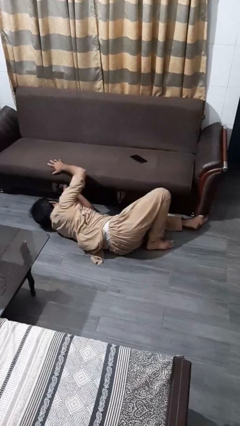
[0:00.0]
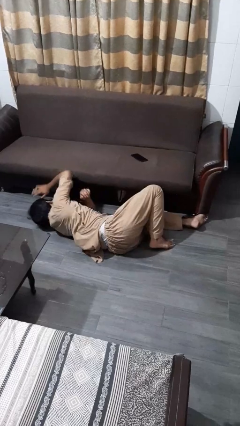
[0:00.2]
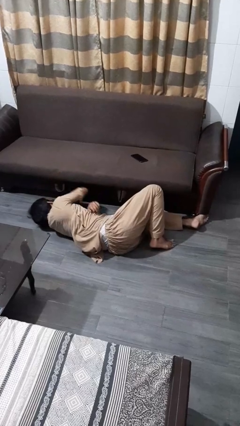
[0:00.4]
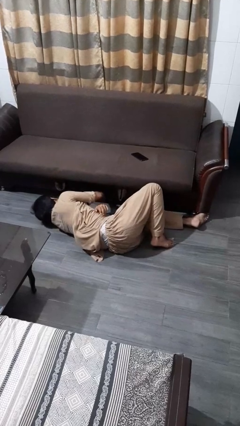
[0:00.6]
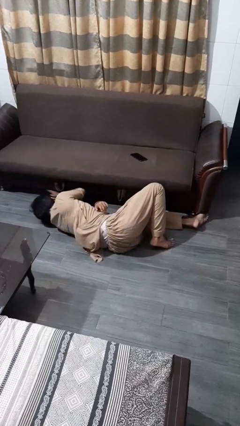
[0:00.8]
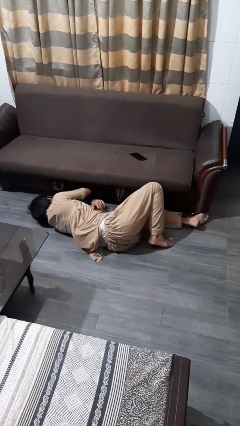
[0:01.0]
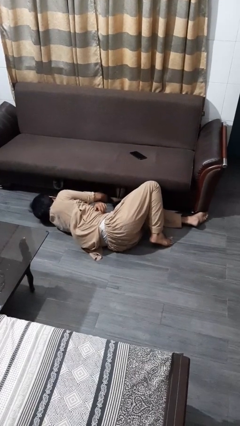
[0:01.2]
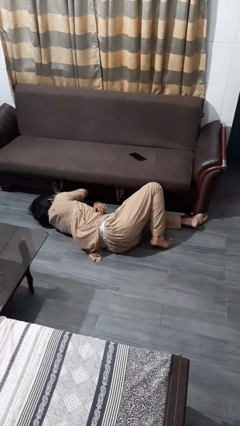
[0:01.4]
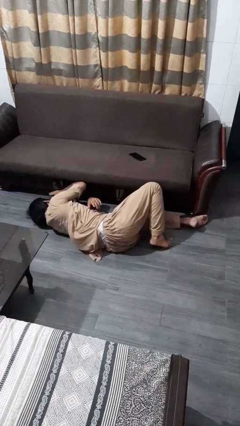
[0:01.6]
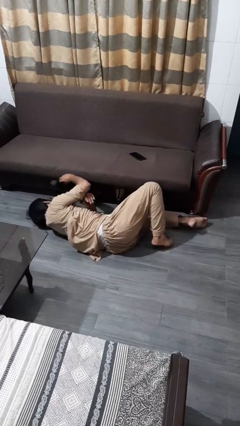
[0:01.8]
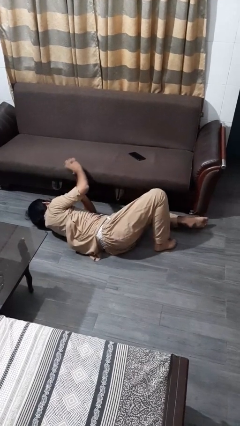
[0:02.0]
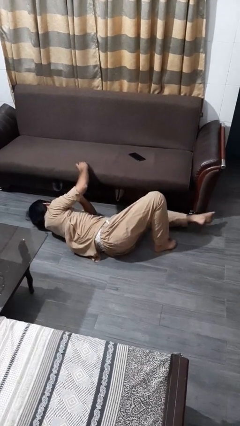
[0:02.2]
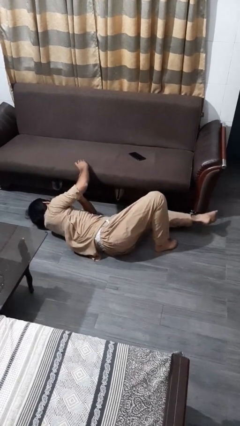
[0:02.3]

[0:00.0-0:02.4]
person searches under couch

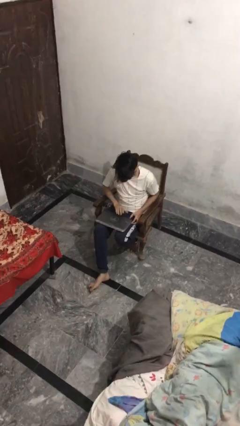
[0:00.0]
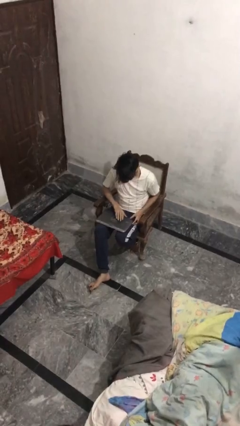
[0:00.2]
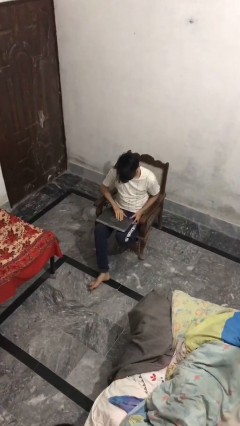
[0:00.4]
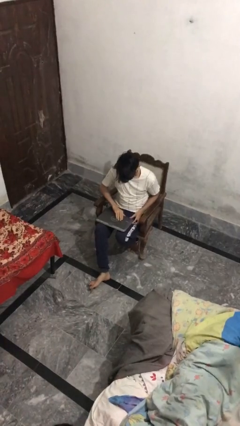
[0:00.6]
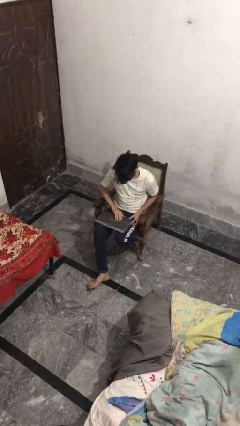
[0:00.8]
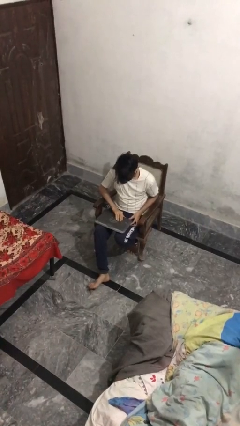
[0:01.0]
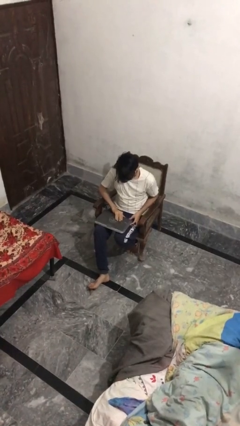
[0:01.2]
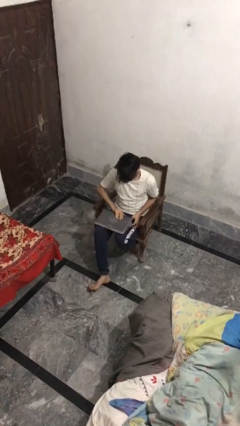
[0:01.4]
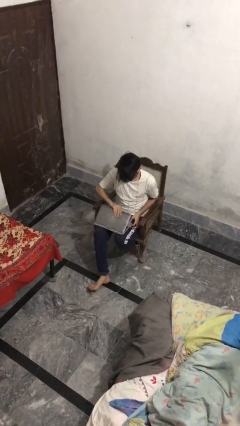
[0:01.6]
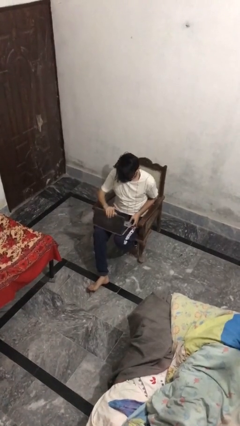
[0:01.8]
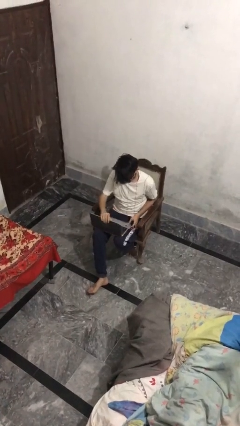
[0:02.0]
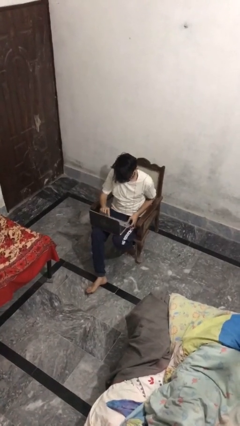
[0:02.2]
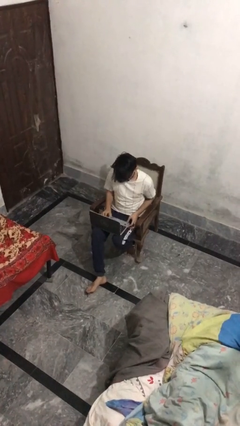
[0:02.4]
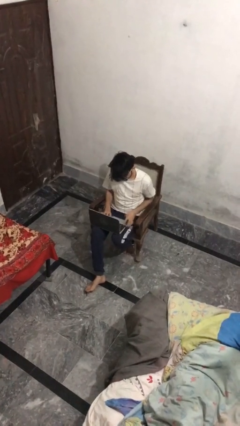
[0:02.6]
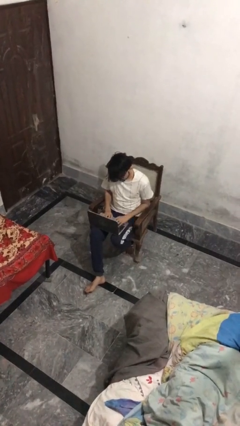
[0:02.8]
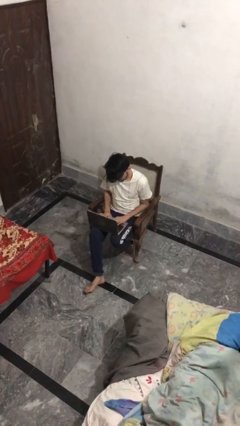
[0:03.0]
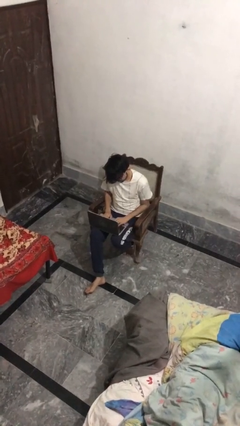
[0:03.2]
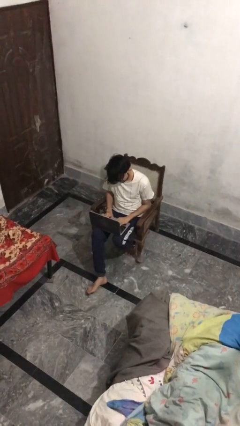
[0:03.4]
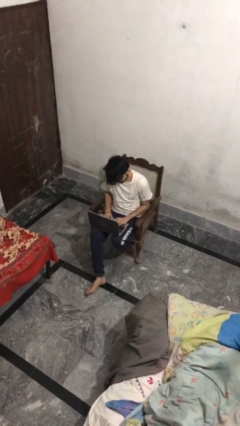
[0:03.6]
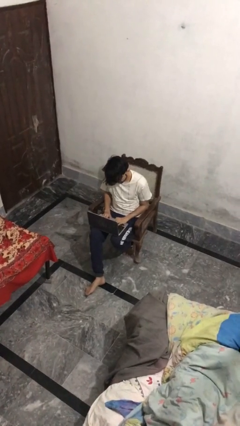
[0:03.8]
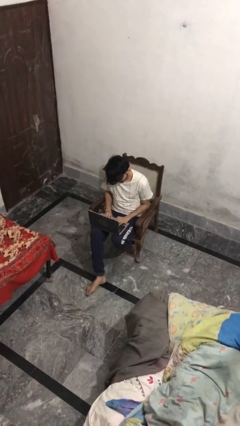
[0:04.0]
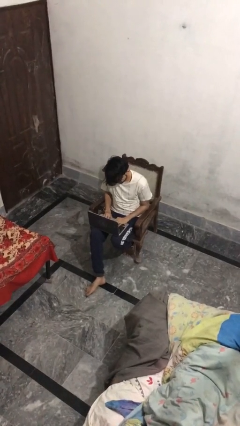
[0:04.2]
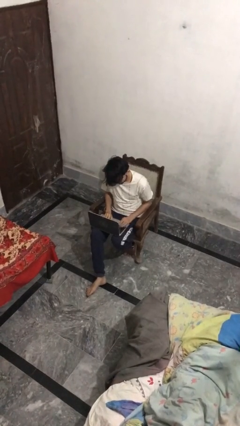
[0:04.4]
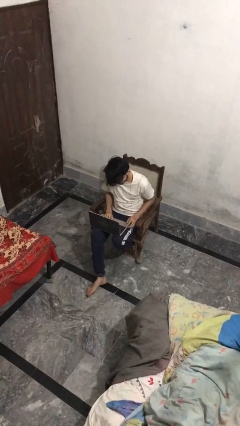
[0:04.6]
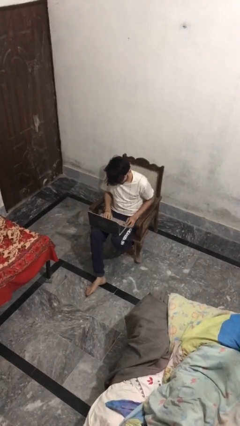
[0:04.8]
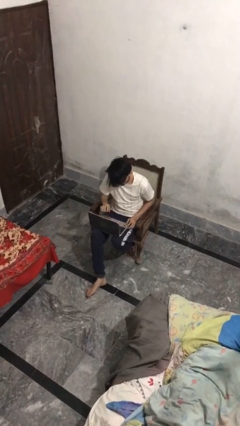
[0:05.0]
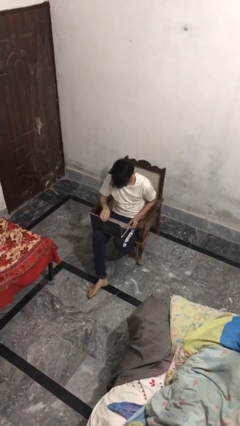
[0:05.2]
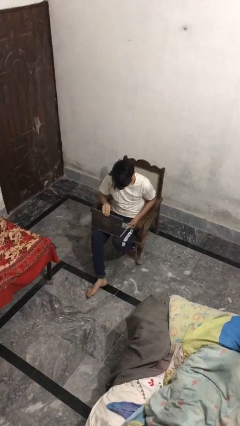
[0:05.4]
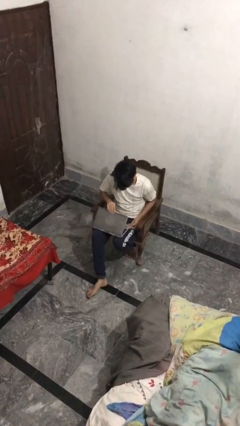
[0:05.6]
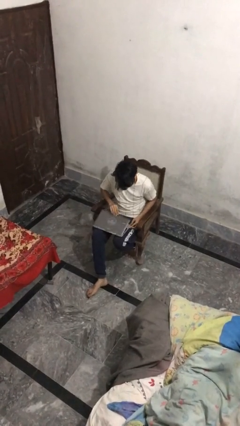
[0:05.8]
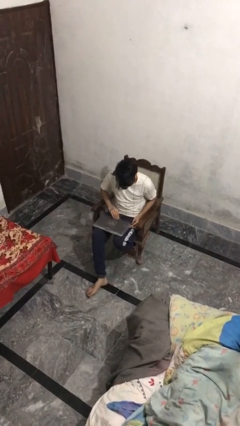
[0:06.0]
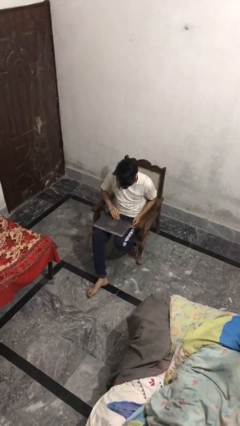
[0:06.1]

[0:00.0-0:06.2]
person interacts with laptop

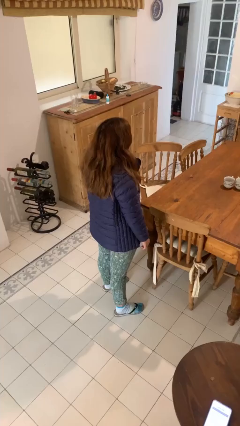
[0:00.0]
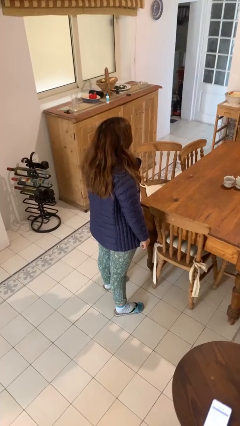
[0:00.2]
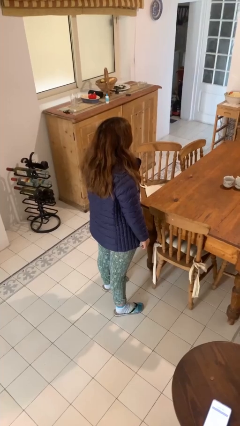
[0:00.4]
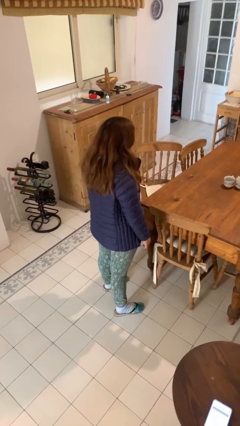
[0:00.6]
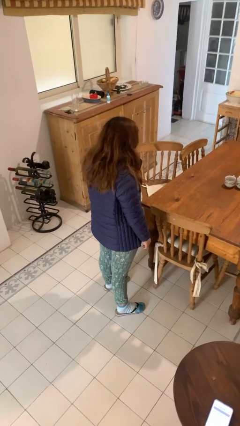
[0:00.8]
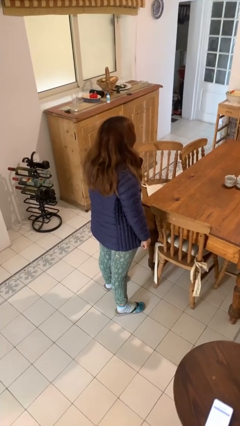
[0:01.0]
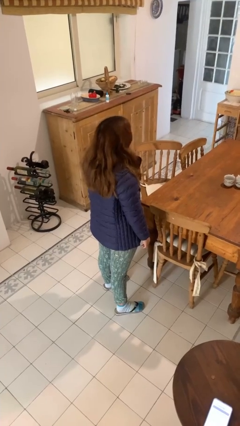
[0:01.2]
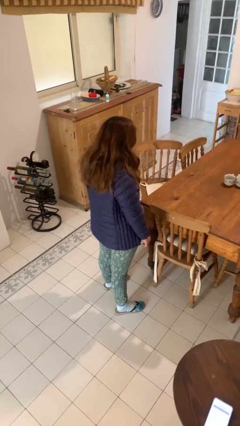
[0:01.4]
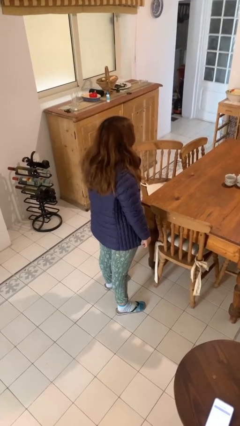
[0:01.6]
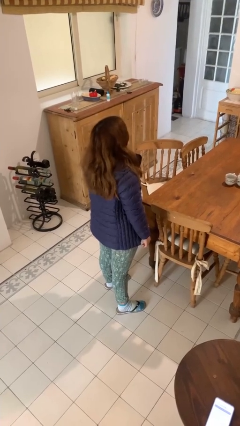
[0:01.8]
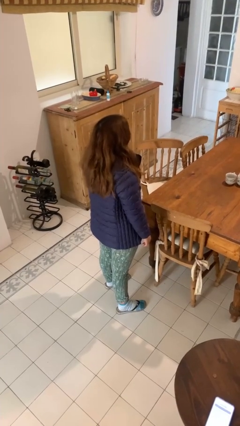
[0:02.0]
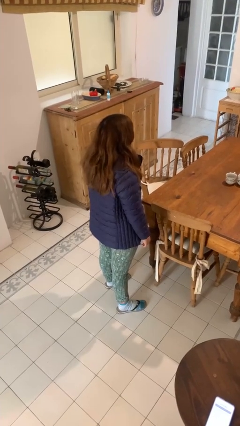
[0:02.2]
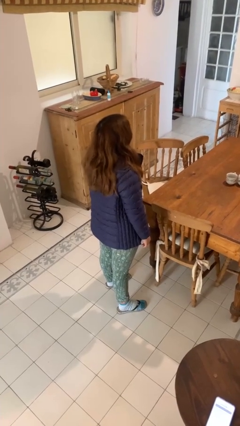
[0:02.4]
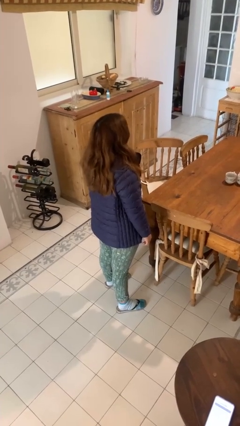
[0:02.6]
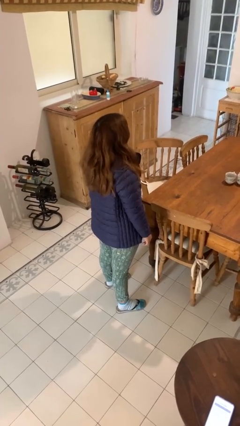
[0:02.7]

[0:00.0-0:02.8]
person nods head

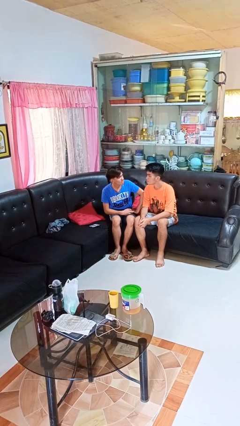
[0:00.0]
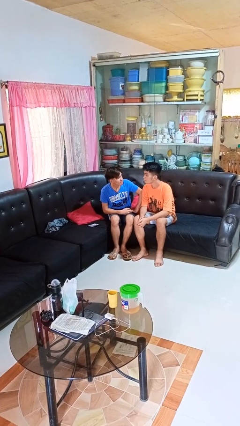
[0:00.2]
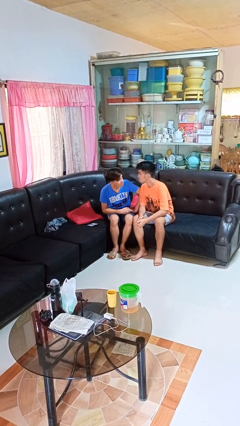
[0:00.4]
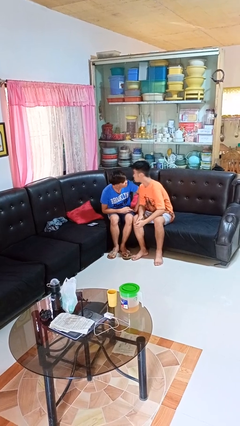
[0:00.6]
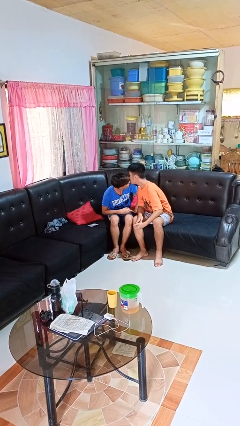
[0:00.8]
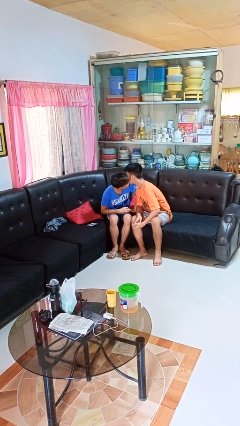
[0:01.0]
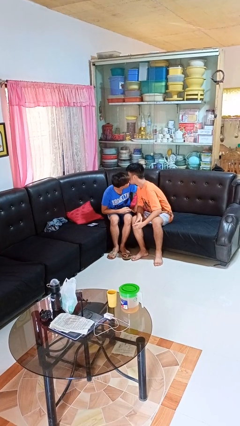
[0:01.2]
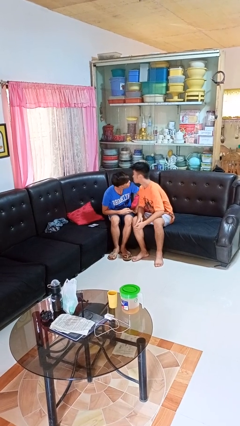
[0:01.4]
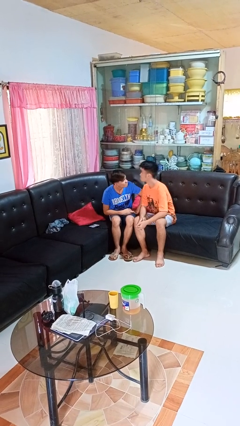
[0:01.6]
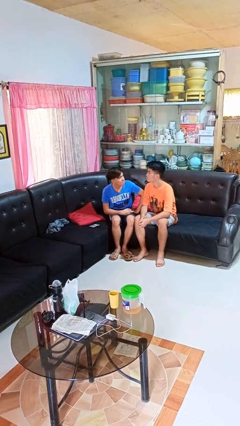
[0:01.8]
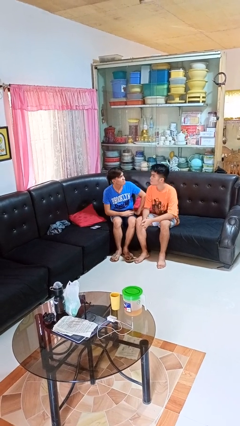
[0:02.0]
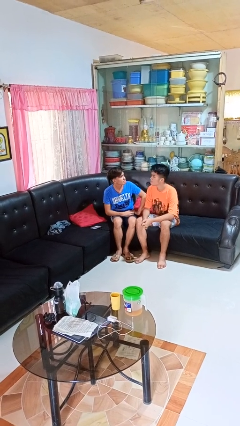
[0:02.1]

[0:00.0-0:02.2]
person kisses cheek of person

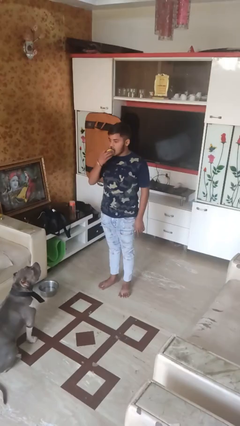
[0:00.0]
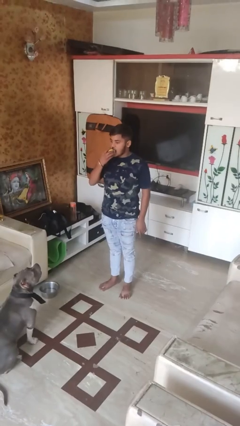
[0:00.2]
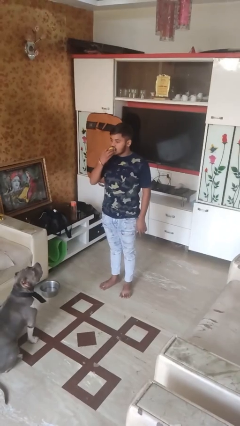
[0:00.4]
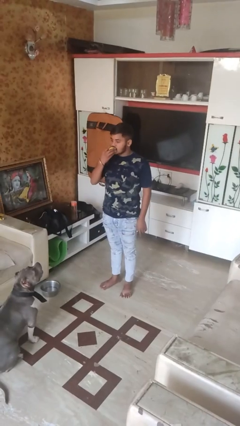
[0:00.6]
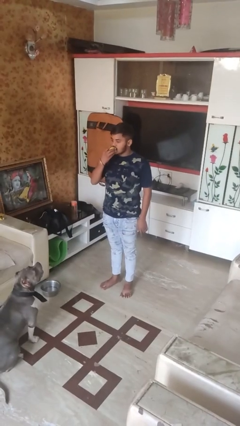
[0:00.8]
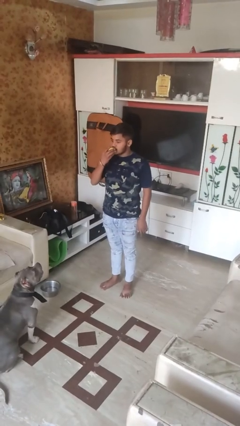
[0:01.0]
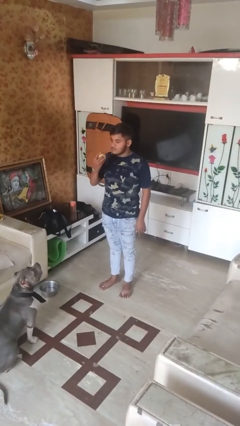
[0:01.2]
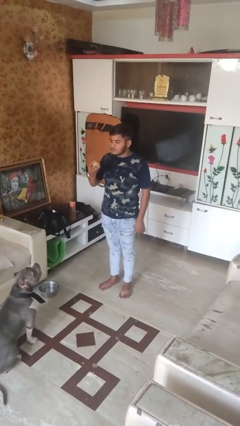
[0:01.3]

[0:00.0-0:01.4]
person eats apple

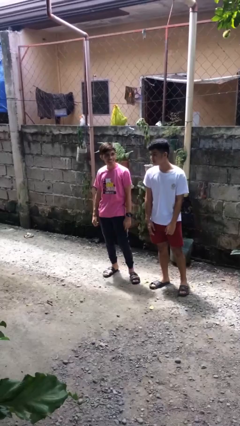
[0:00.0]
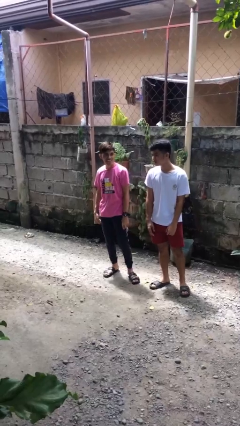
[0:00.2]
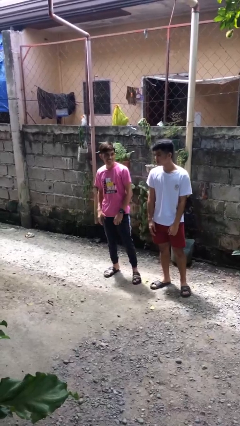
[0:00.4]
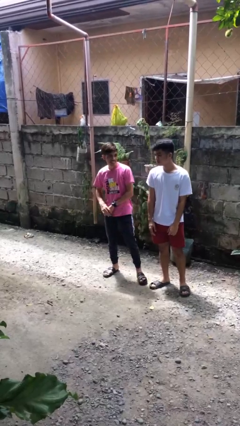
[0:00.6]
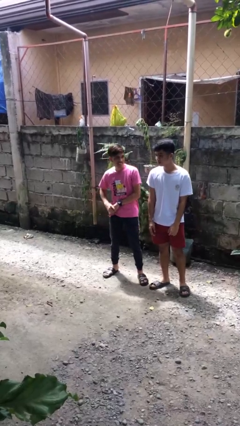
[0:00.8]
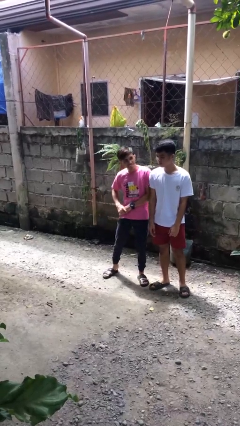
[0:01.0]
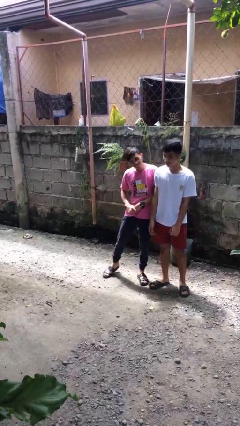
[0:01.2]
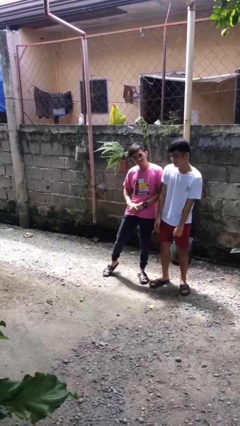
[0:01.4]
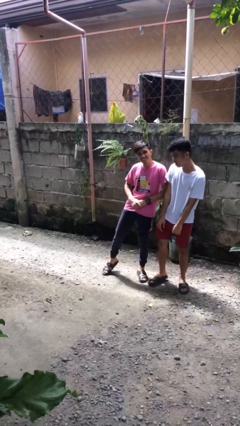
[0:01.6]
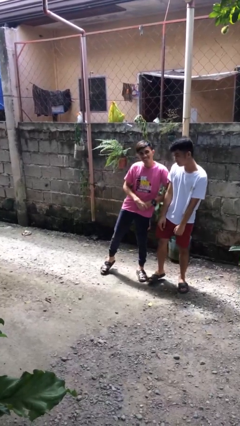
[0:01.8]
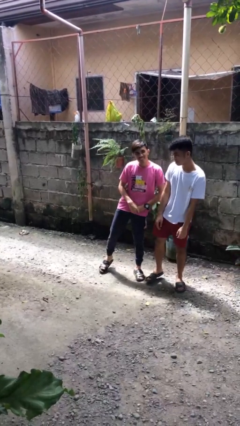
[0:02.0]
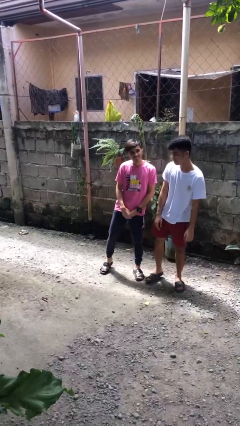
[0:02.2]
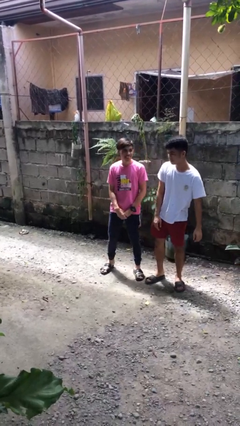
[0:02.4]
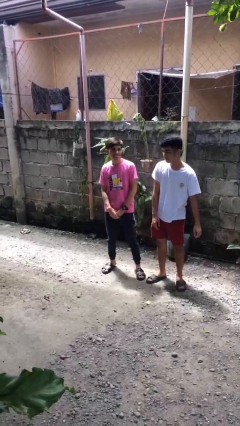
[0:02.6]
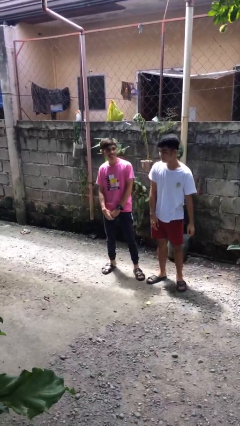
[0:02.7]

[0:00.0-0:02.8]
person nudges person with elbow
